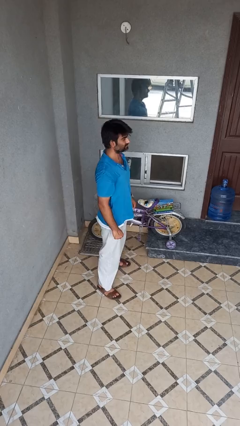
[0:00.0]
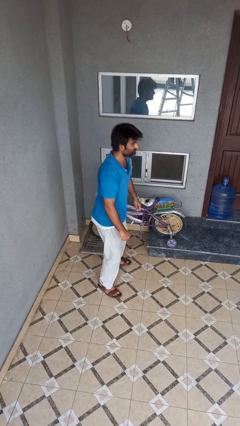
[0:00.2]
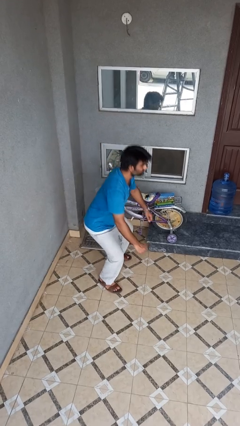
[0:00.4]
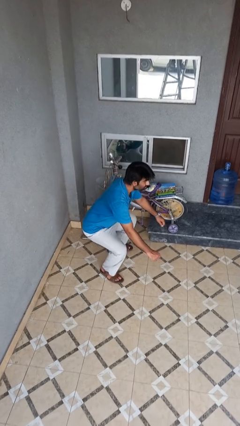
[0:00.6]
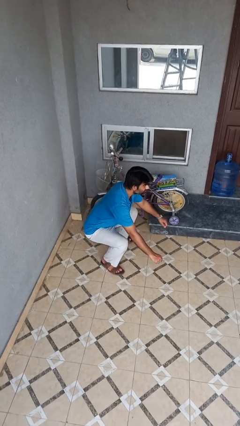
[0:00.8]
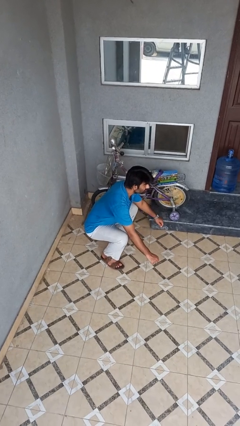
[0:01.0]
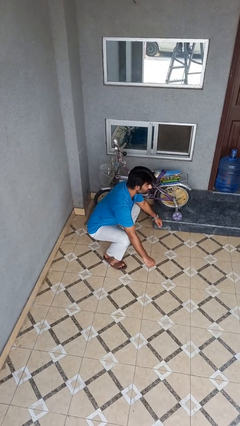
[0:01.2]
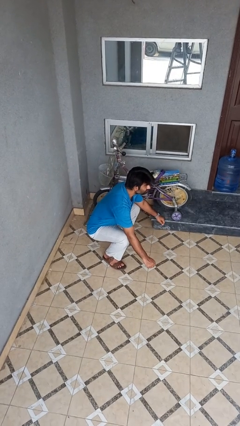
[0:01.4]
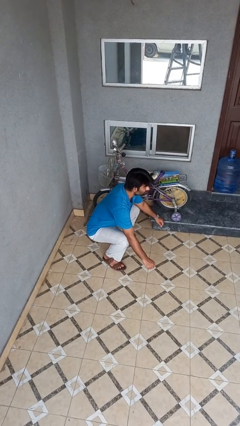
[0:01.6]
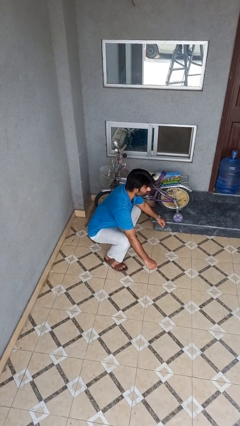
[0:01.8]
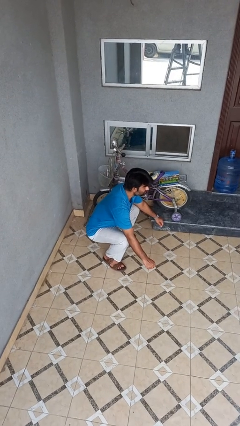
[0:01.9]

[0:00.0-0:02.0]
person squats

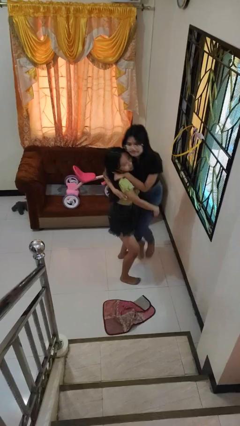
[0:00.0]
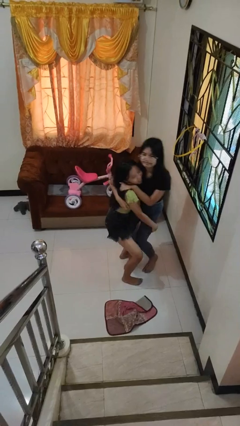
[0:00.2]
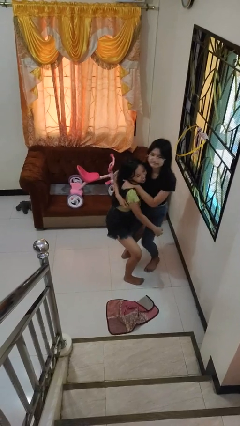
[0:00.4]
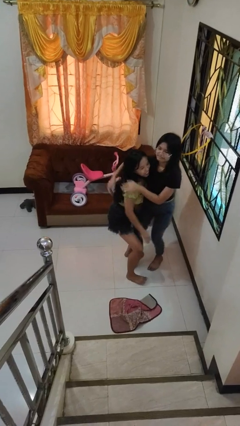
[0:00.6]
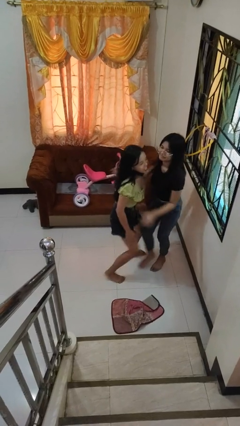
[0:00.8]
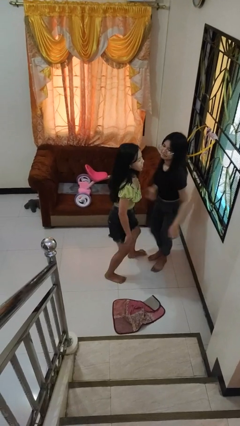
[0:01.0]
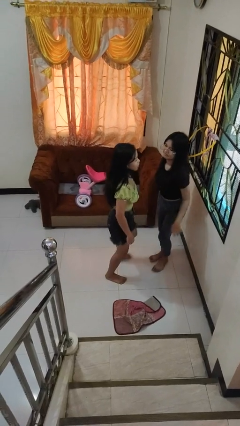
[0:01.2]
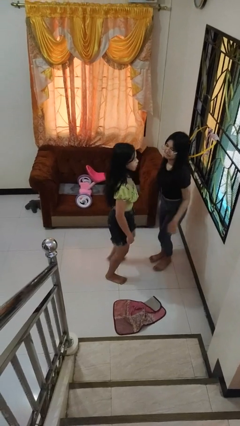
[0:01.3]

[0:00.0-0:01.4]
person puts down person

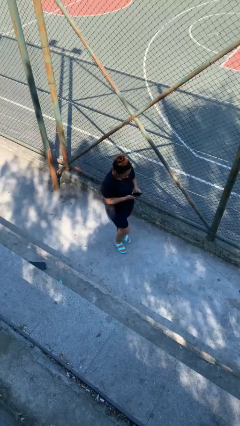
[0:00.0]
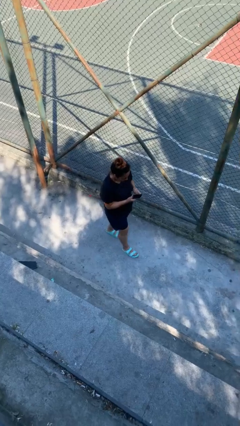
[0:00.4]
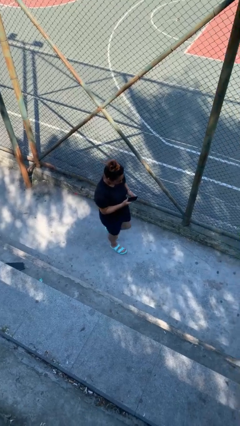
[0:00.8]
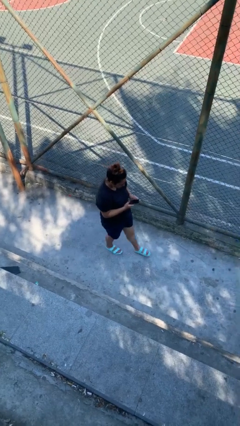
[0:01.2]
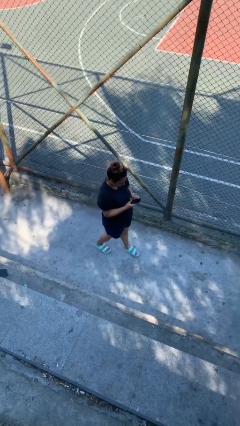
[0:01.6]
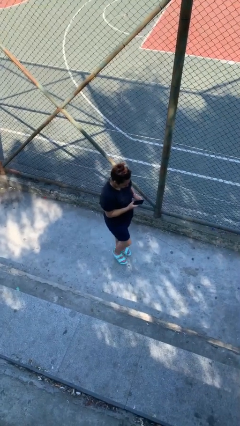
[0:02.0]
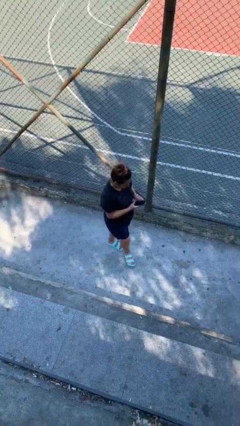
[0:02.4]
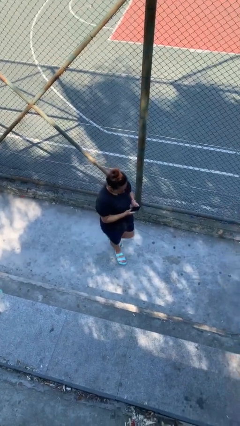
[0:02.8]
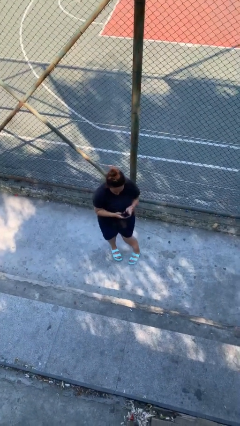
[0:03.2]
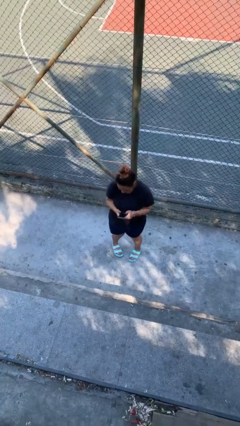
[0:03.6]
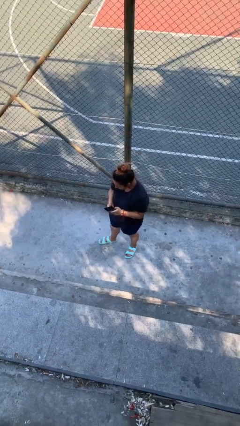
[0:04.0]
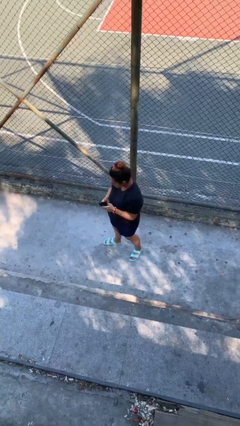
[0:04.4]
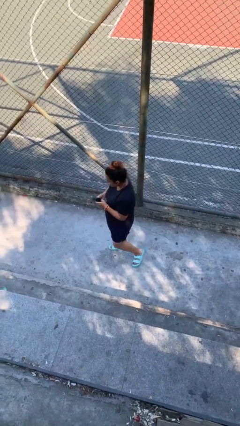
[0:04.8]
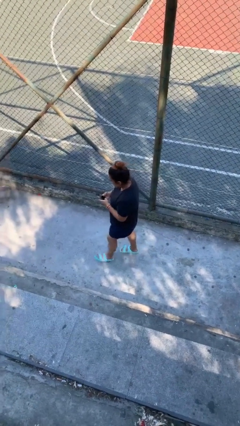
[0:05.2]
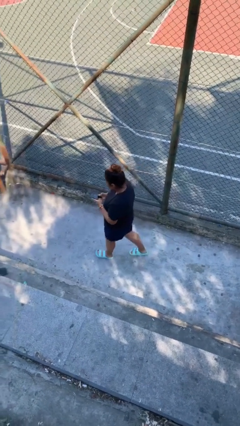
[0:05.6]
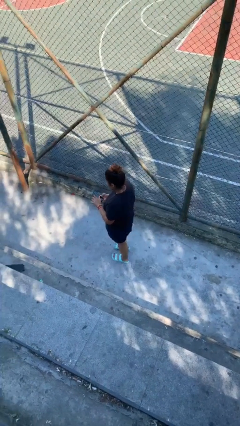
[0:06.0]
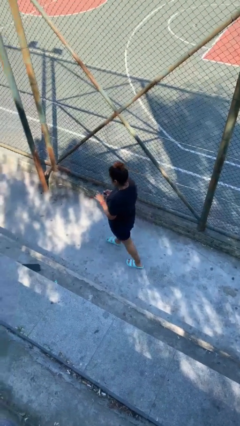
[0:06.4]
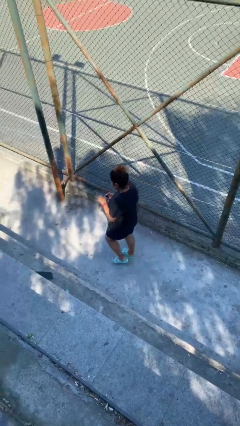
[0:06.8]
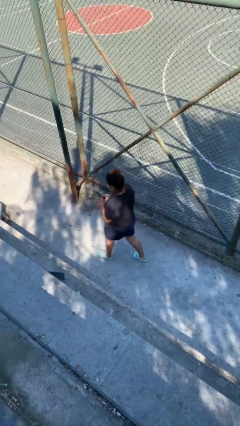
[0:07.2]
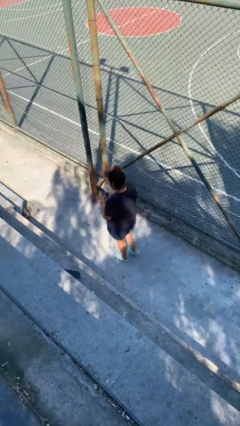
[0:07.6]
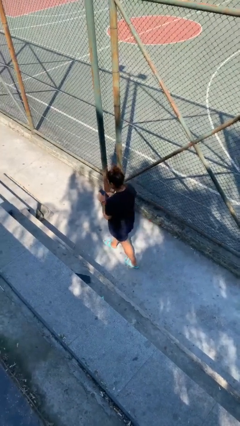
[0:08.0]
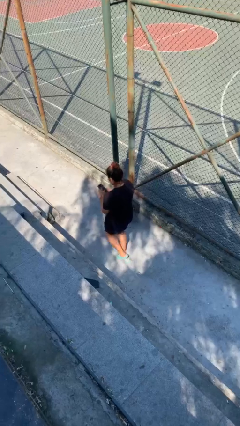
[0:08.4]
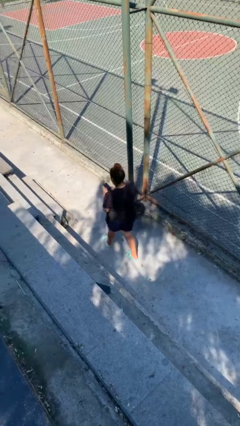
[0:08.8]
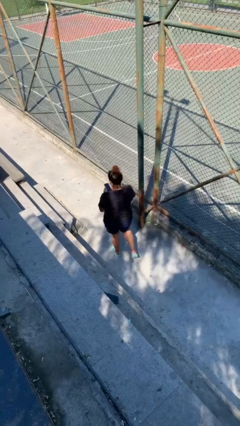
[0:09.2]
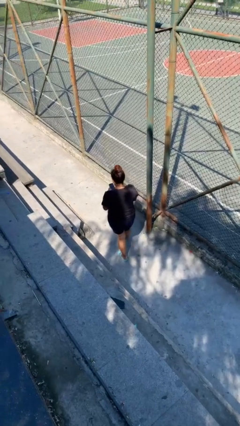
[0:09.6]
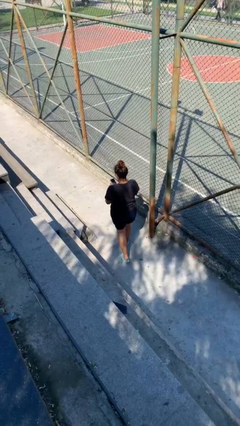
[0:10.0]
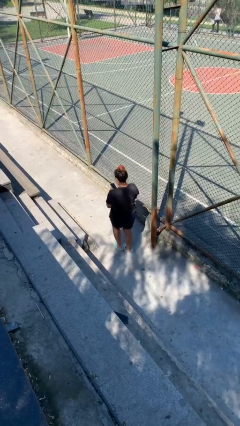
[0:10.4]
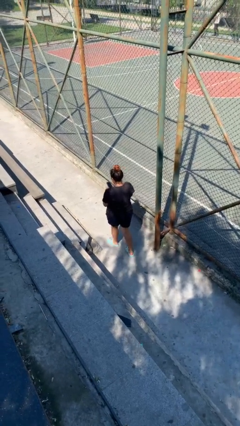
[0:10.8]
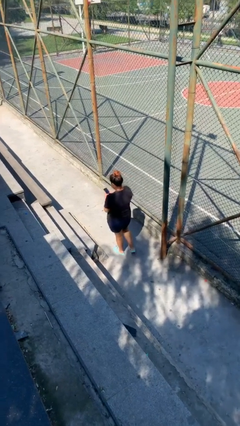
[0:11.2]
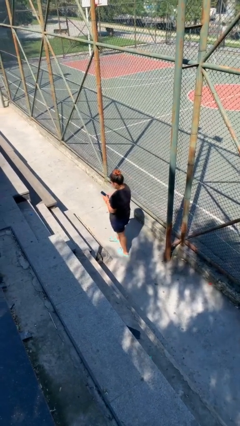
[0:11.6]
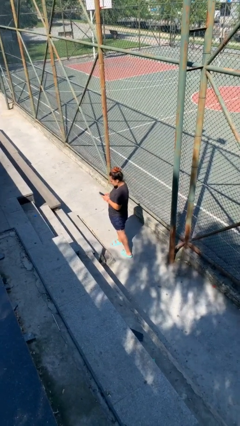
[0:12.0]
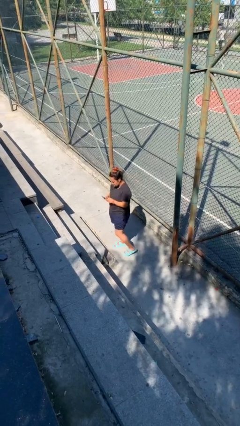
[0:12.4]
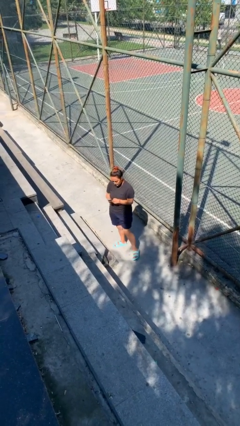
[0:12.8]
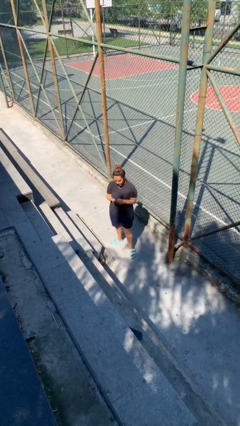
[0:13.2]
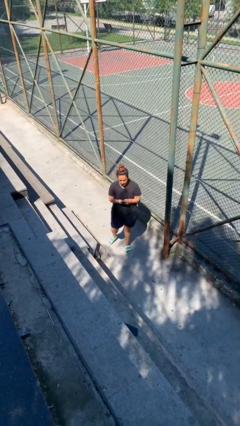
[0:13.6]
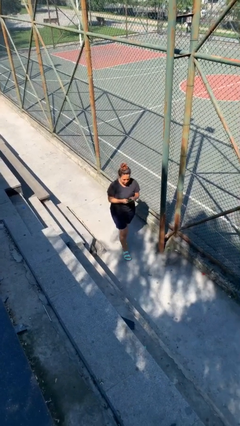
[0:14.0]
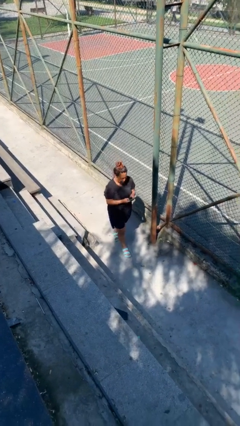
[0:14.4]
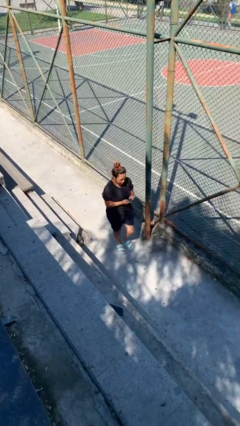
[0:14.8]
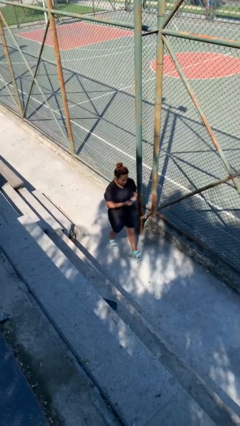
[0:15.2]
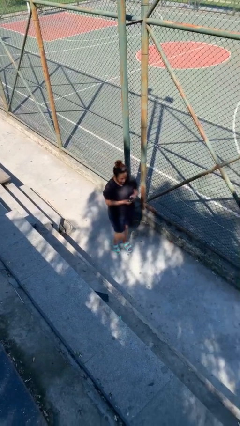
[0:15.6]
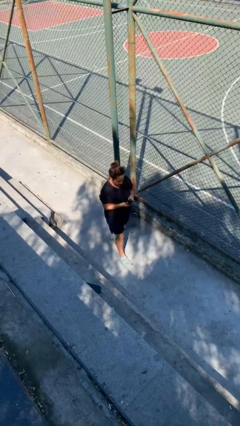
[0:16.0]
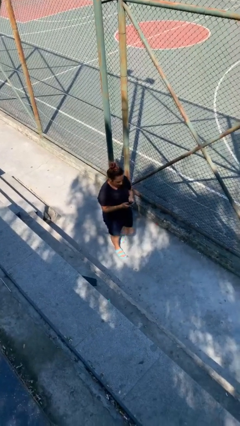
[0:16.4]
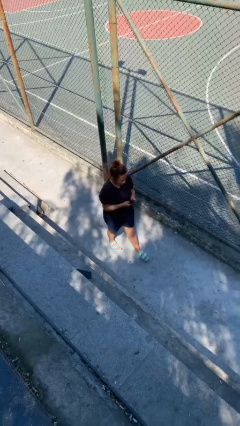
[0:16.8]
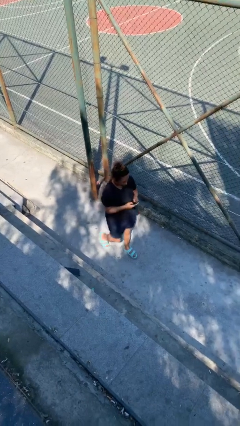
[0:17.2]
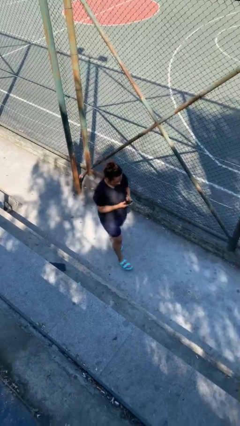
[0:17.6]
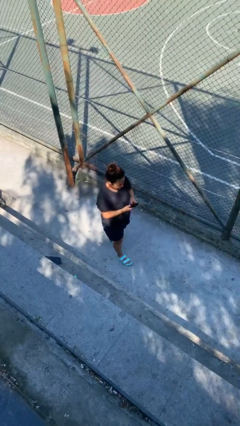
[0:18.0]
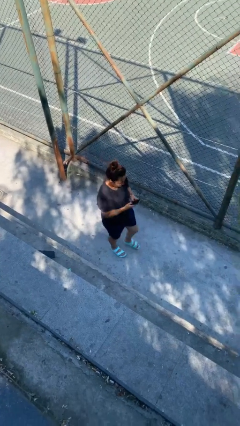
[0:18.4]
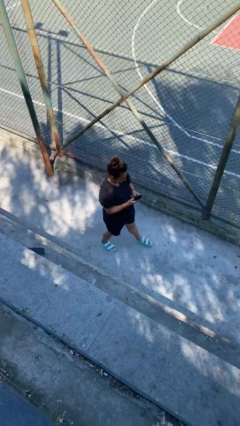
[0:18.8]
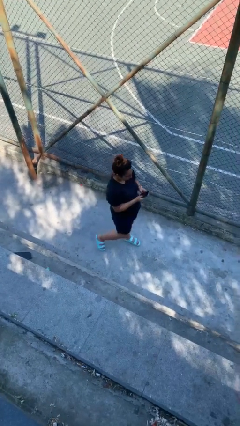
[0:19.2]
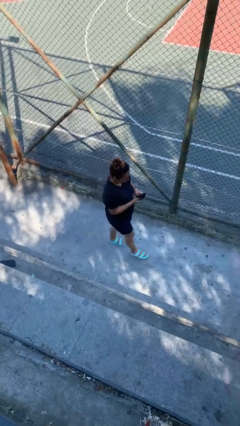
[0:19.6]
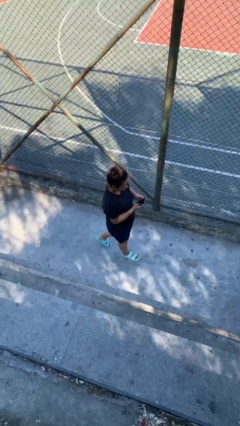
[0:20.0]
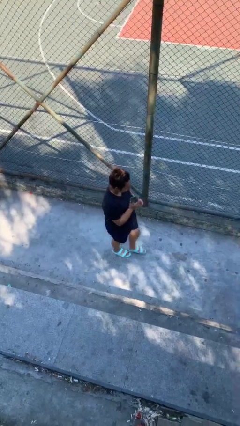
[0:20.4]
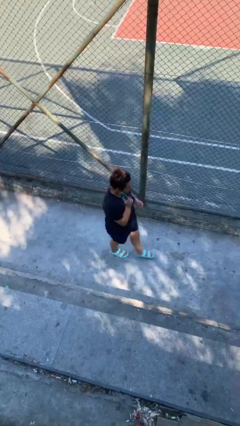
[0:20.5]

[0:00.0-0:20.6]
person texts on phone

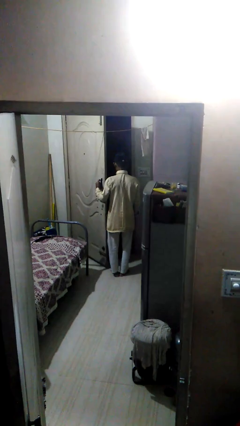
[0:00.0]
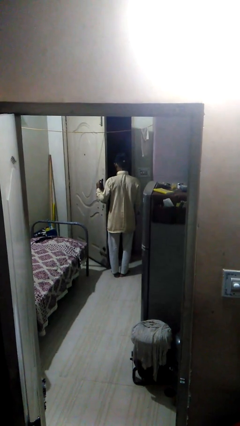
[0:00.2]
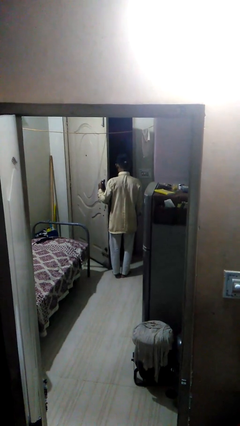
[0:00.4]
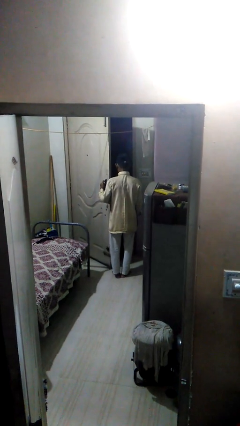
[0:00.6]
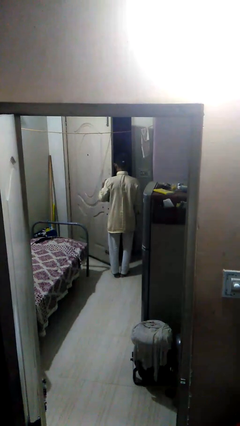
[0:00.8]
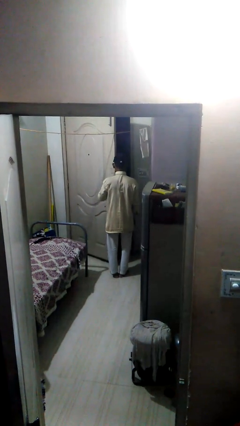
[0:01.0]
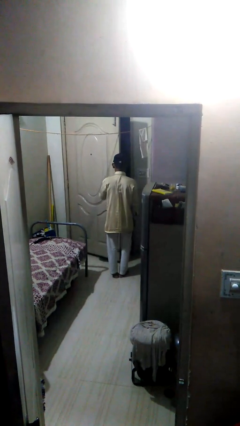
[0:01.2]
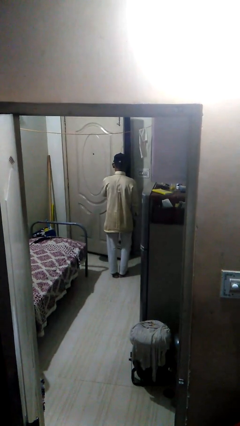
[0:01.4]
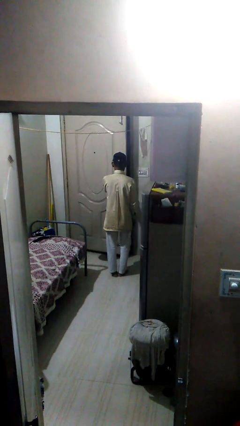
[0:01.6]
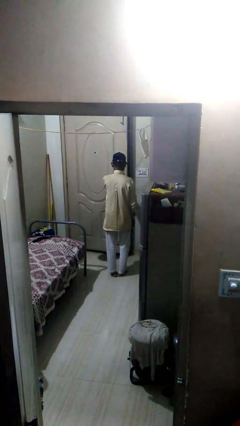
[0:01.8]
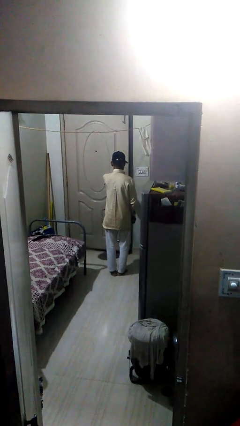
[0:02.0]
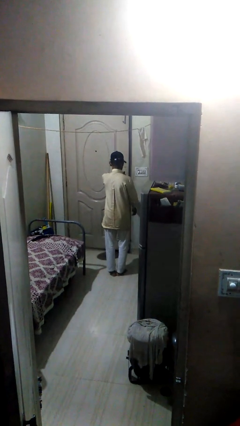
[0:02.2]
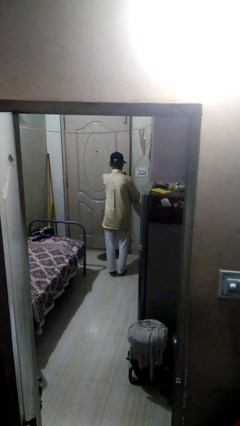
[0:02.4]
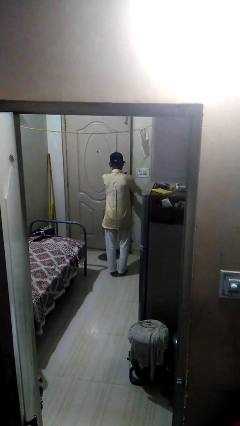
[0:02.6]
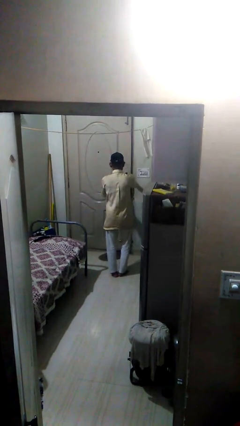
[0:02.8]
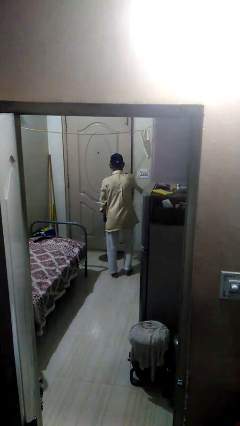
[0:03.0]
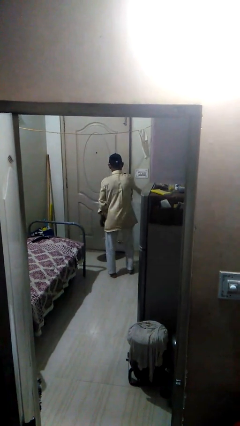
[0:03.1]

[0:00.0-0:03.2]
person closes facility door

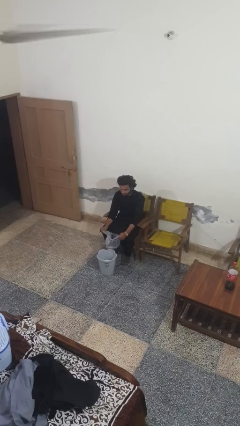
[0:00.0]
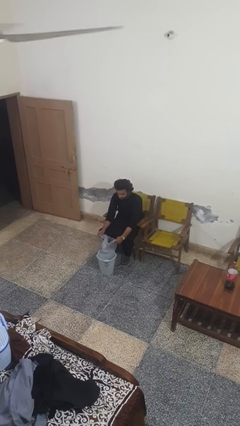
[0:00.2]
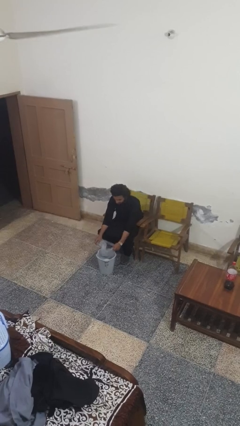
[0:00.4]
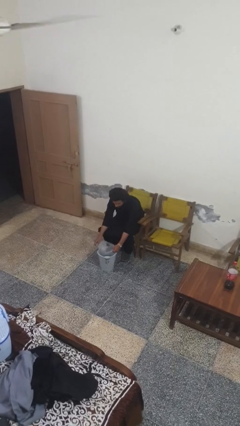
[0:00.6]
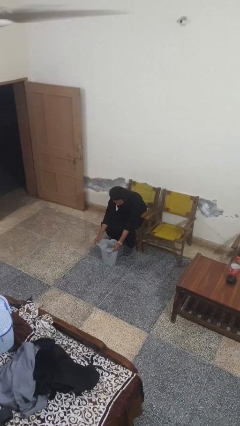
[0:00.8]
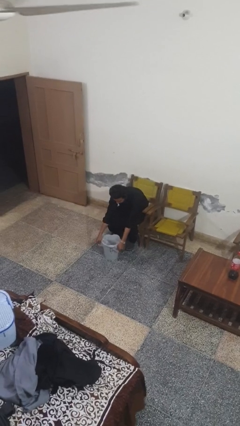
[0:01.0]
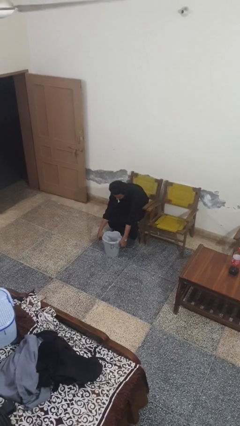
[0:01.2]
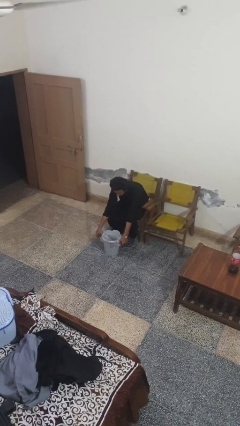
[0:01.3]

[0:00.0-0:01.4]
person inserts trashbag into trashcan
